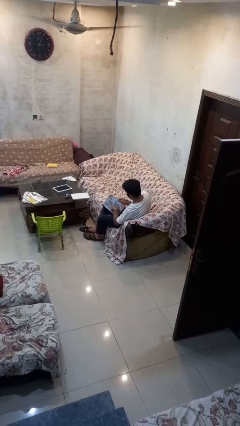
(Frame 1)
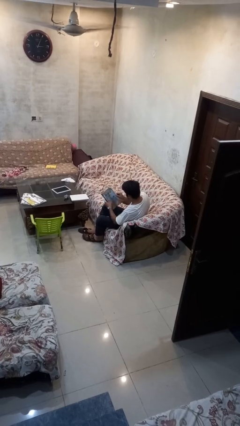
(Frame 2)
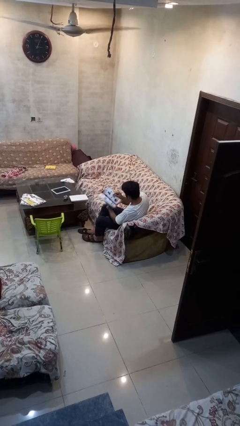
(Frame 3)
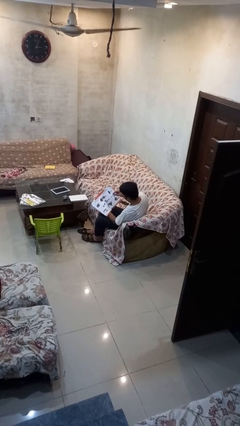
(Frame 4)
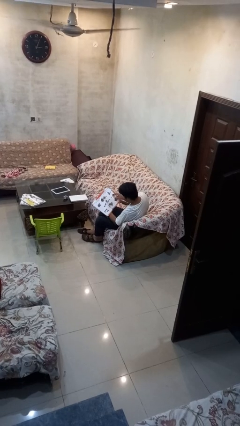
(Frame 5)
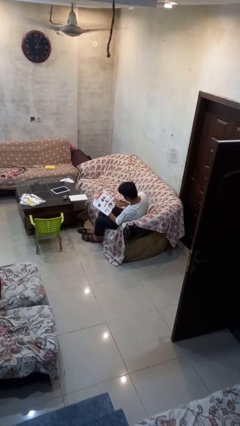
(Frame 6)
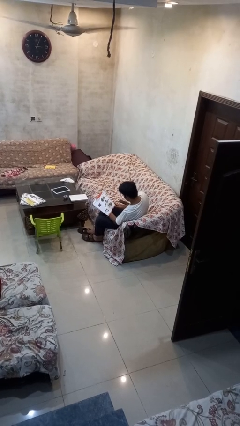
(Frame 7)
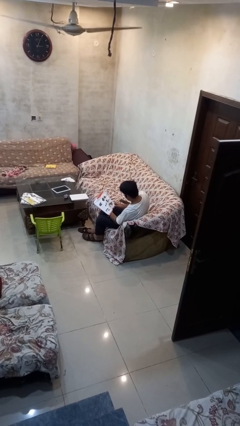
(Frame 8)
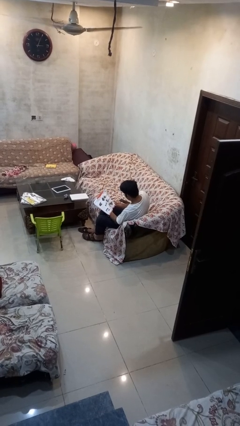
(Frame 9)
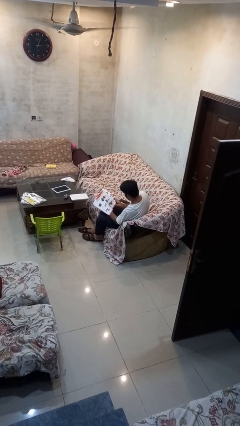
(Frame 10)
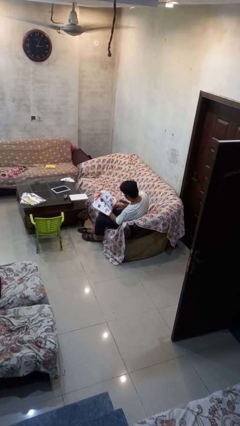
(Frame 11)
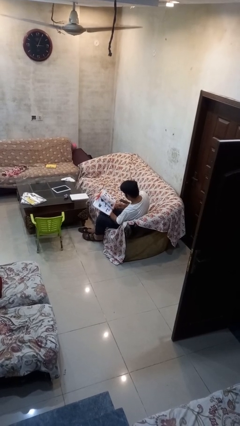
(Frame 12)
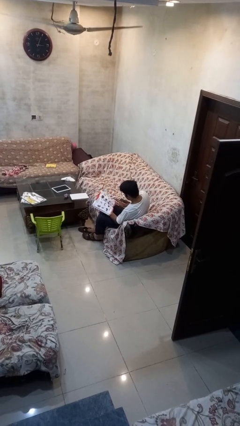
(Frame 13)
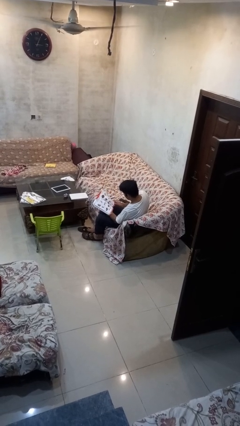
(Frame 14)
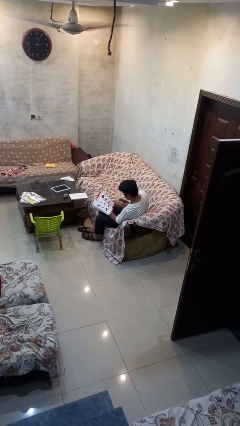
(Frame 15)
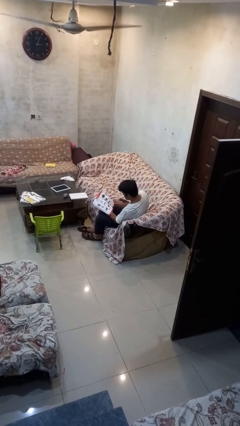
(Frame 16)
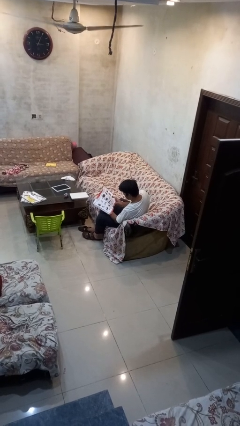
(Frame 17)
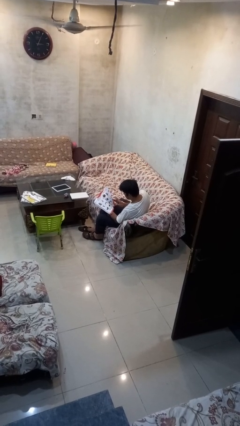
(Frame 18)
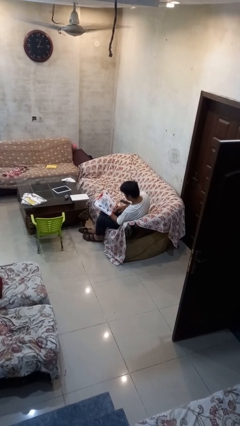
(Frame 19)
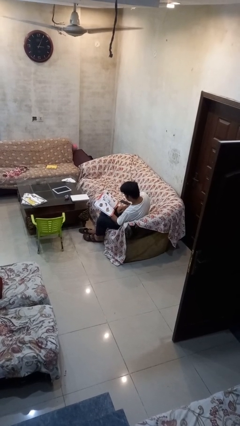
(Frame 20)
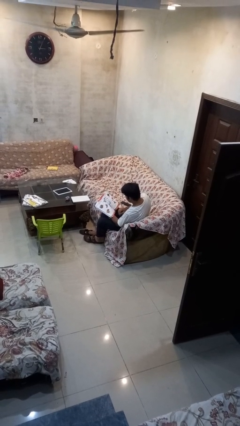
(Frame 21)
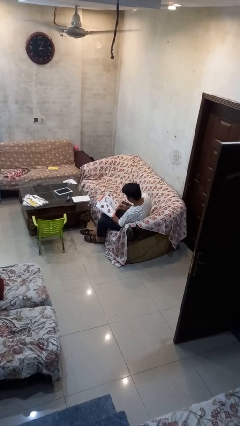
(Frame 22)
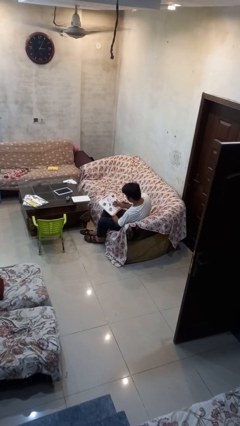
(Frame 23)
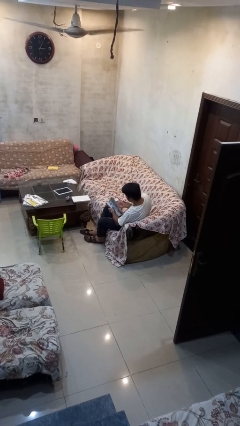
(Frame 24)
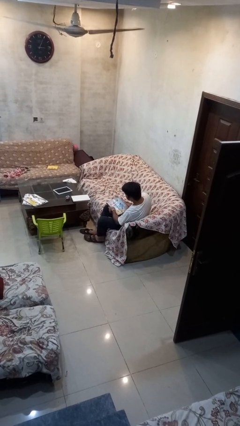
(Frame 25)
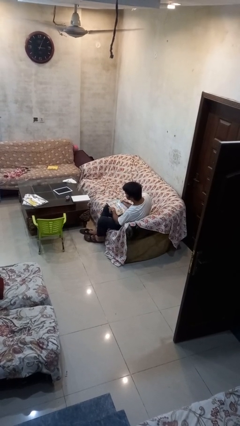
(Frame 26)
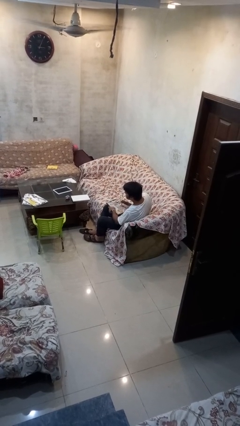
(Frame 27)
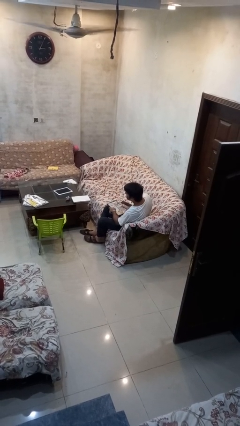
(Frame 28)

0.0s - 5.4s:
person reads book

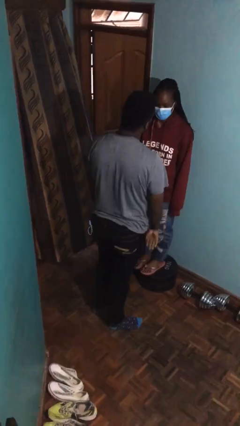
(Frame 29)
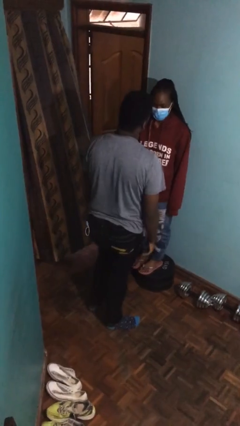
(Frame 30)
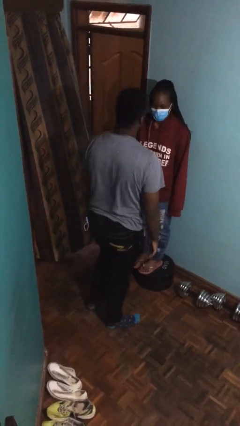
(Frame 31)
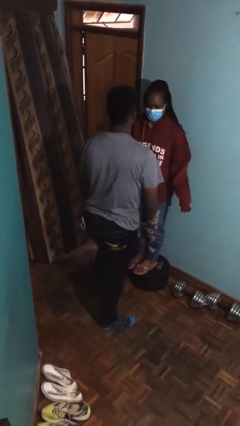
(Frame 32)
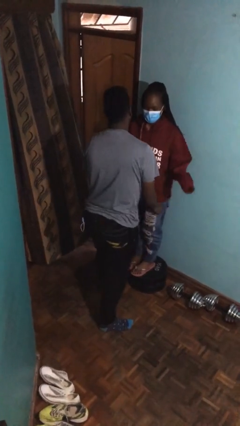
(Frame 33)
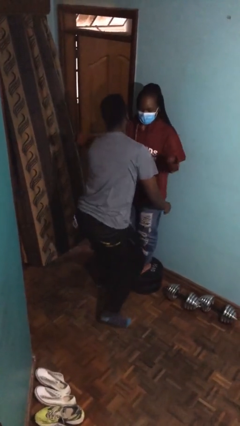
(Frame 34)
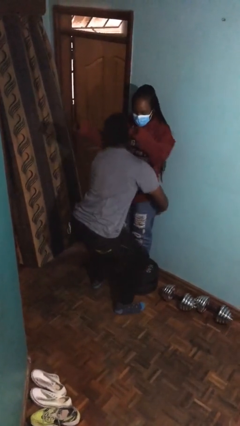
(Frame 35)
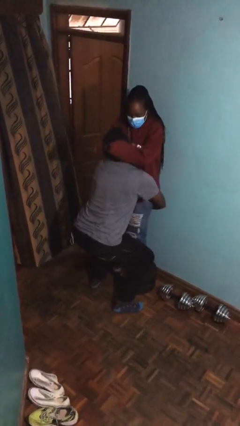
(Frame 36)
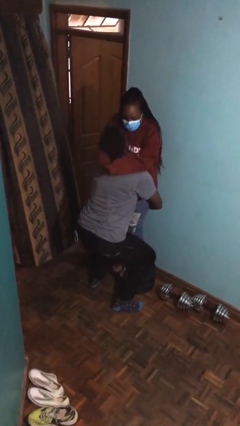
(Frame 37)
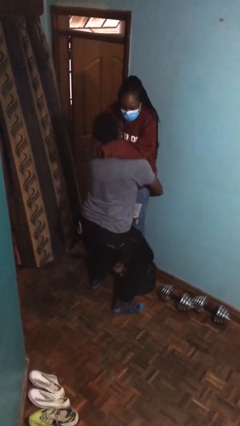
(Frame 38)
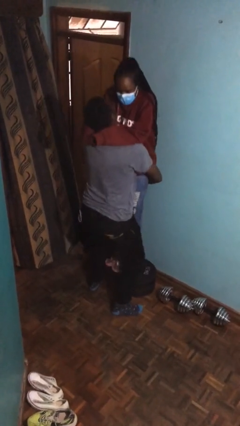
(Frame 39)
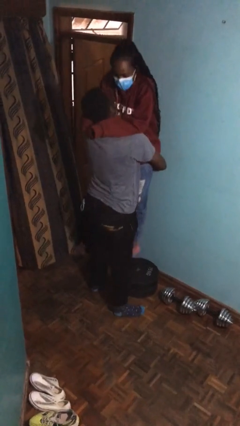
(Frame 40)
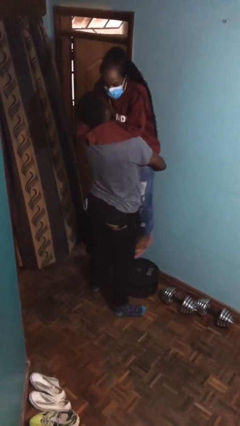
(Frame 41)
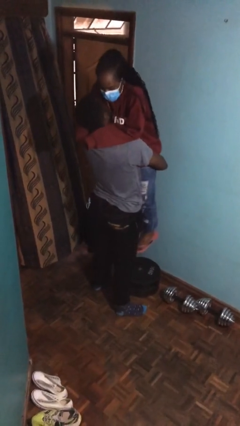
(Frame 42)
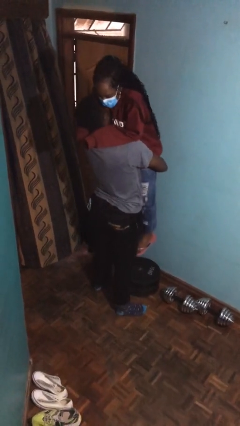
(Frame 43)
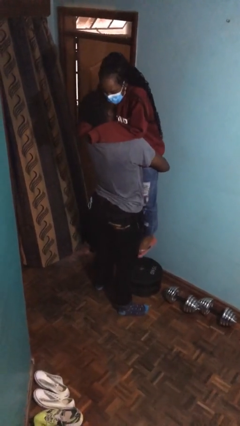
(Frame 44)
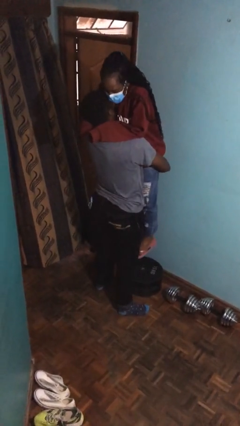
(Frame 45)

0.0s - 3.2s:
person picks up person

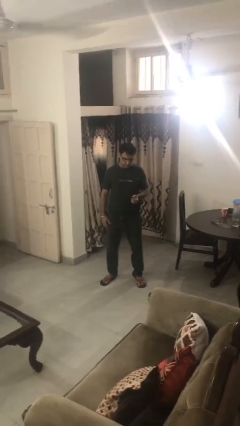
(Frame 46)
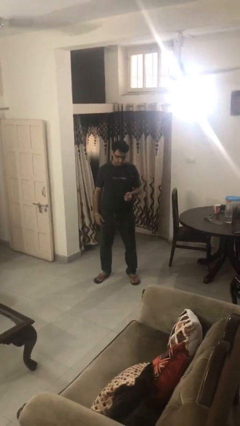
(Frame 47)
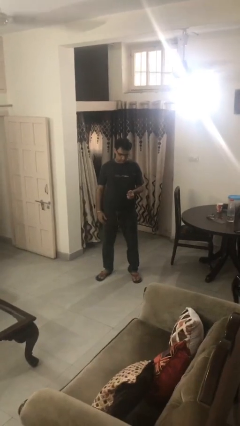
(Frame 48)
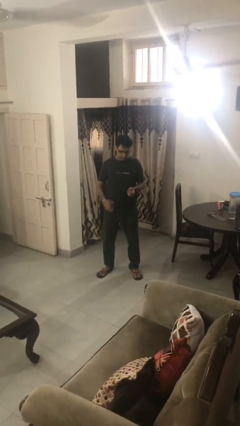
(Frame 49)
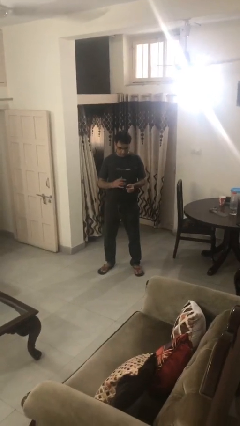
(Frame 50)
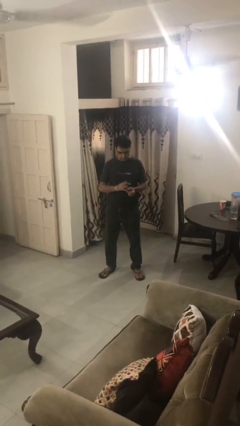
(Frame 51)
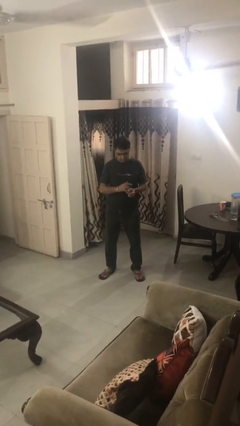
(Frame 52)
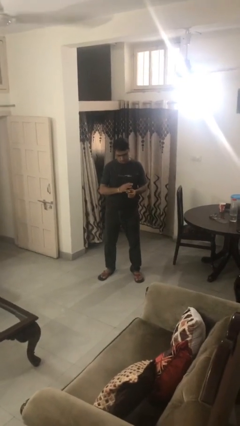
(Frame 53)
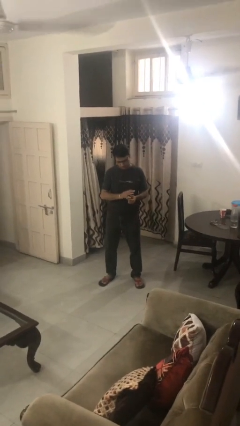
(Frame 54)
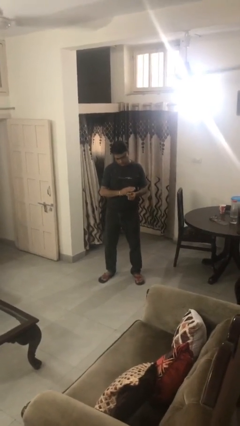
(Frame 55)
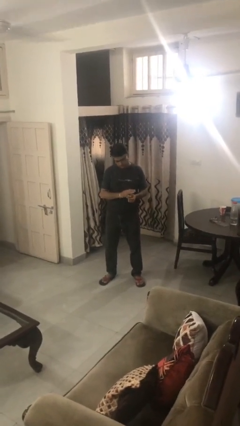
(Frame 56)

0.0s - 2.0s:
person puts on ring

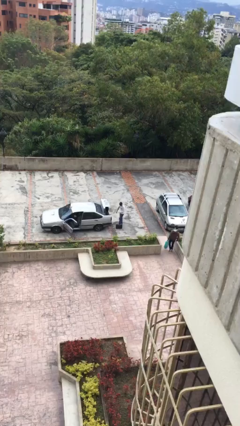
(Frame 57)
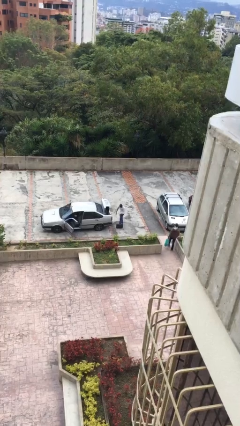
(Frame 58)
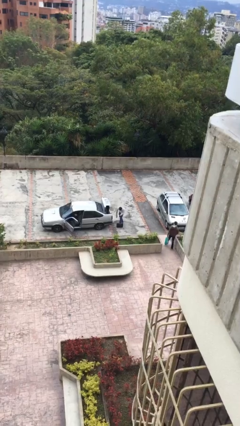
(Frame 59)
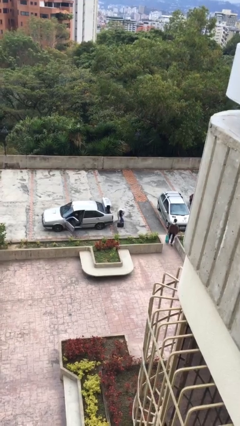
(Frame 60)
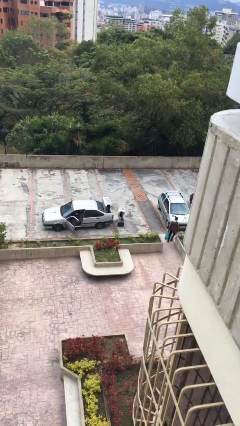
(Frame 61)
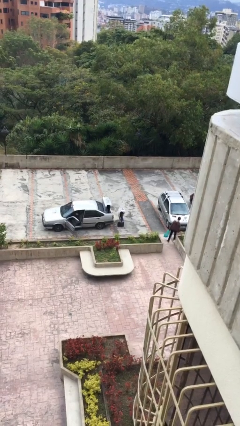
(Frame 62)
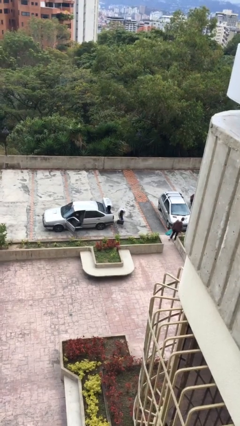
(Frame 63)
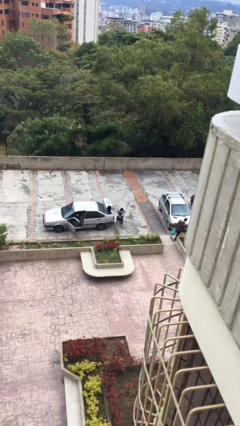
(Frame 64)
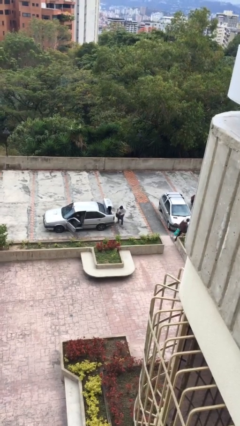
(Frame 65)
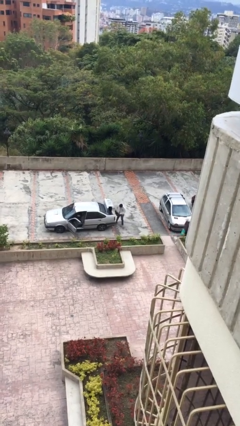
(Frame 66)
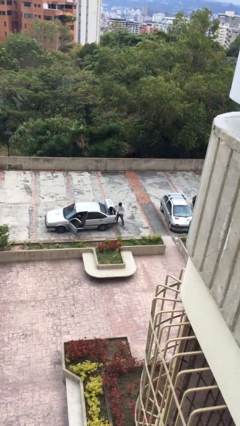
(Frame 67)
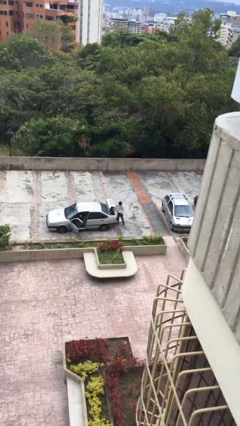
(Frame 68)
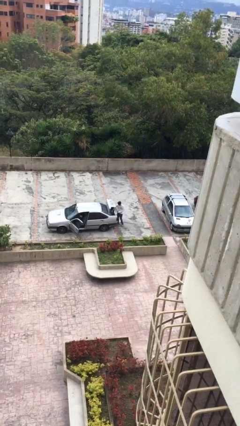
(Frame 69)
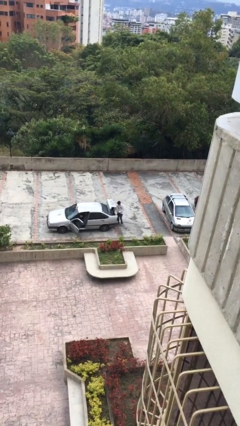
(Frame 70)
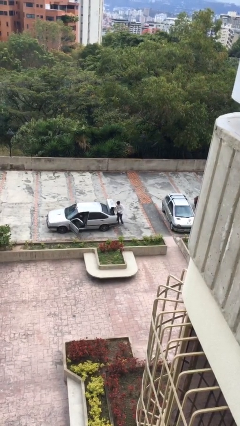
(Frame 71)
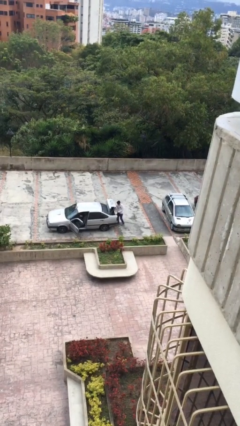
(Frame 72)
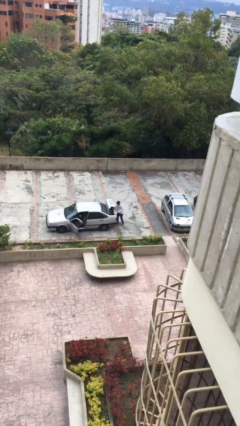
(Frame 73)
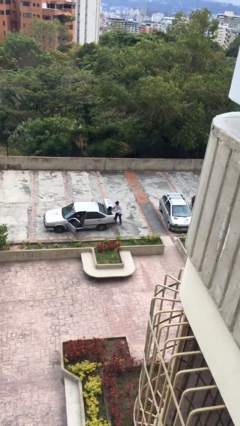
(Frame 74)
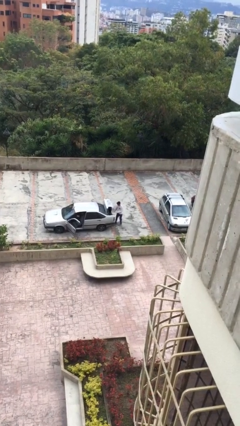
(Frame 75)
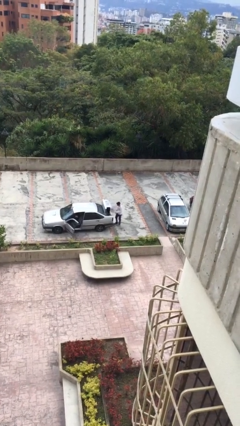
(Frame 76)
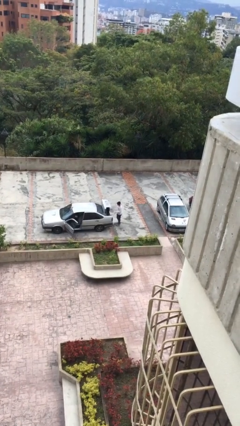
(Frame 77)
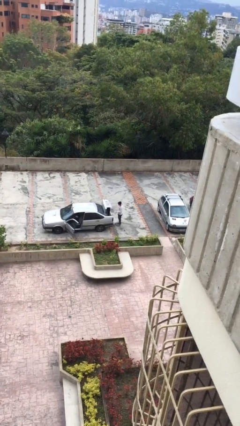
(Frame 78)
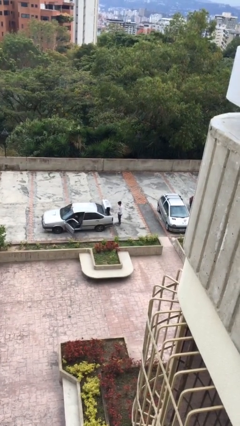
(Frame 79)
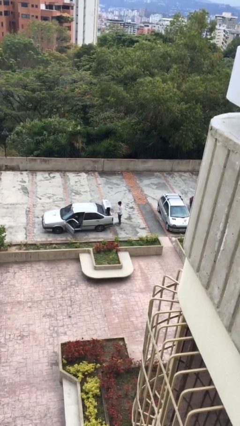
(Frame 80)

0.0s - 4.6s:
person loads car

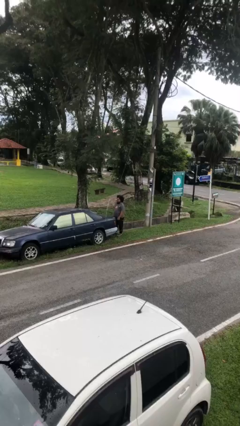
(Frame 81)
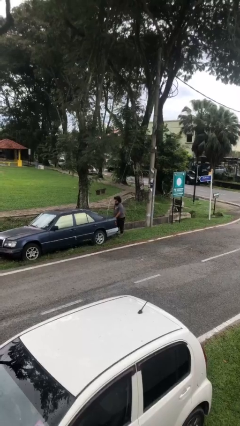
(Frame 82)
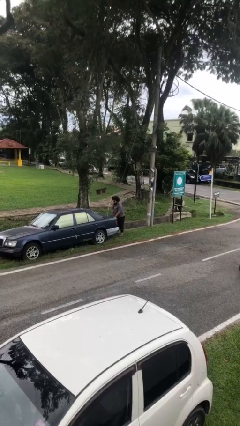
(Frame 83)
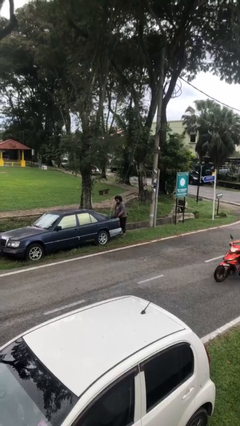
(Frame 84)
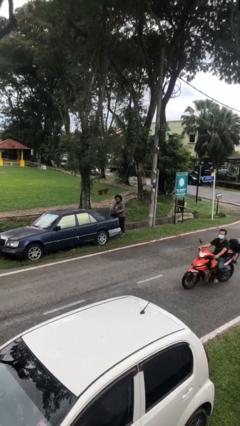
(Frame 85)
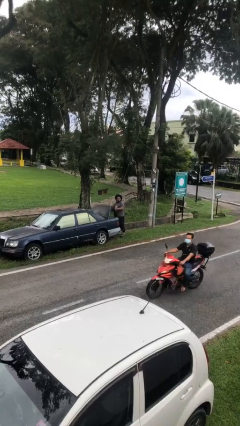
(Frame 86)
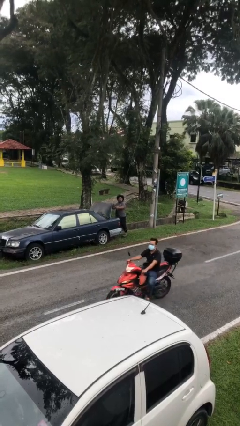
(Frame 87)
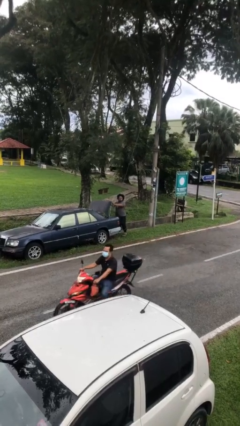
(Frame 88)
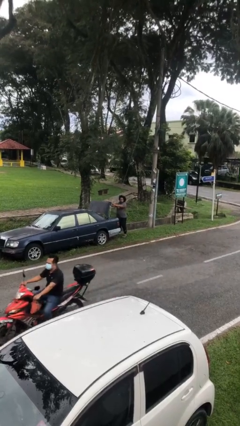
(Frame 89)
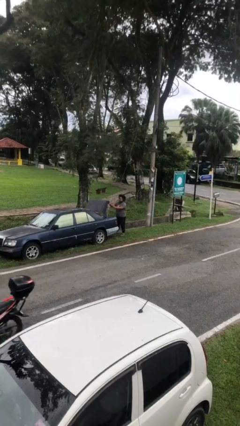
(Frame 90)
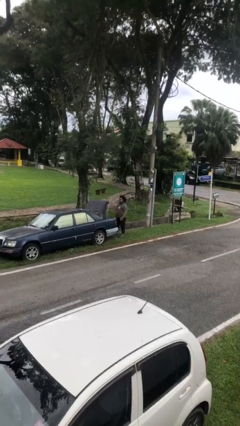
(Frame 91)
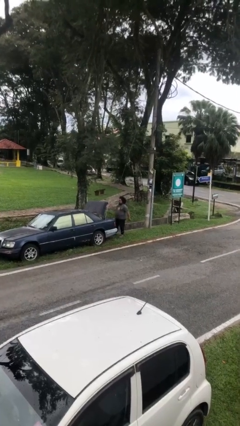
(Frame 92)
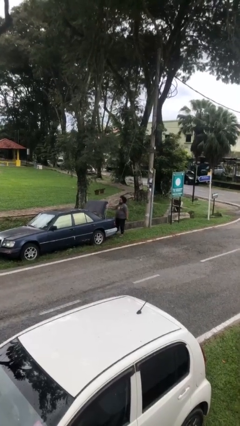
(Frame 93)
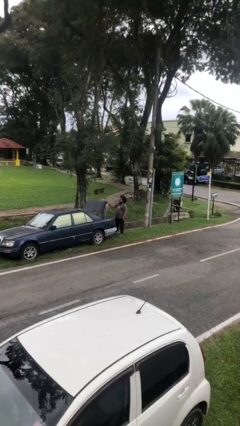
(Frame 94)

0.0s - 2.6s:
person opens car trunk
